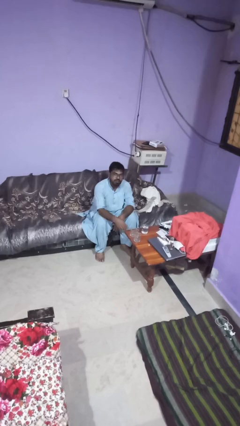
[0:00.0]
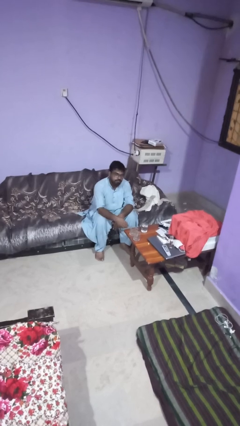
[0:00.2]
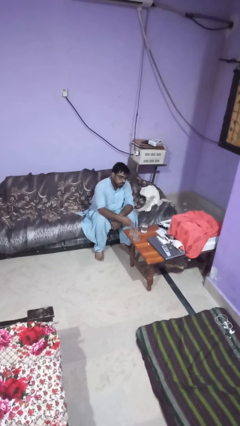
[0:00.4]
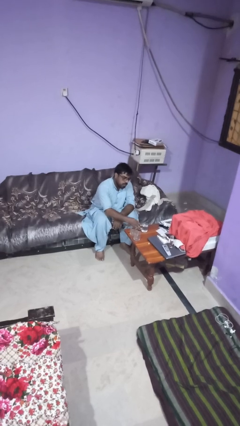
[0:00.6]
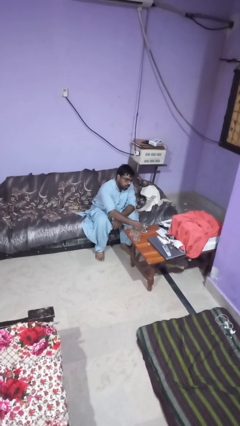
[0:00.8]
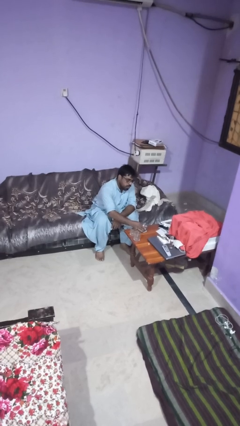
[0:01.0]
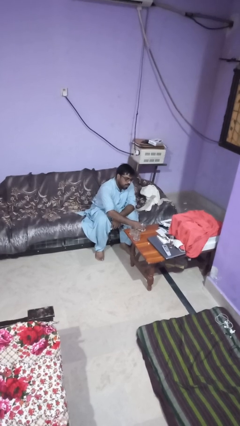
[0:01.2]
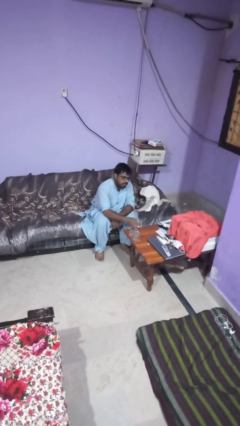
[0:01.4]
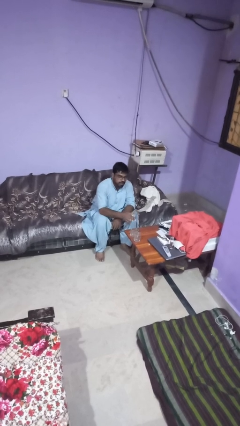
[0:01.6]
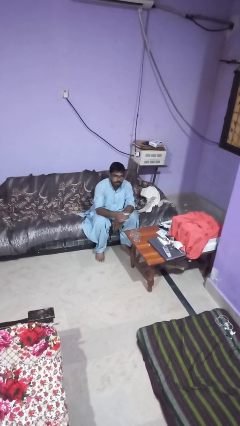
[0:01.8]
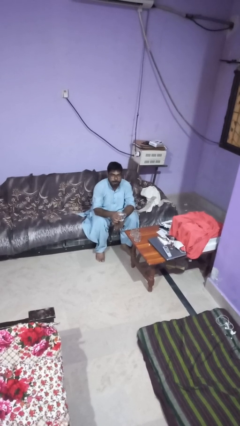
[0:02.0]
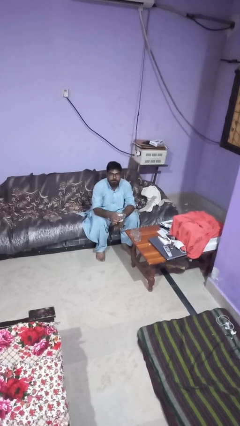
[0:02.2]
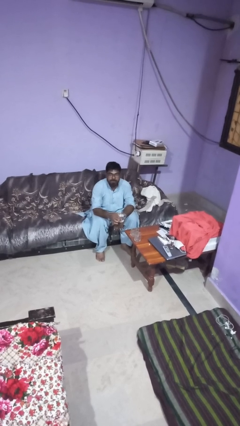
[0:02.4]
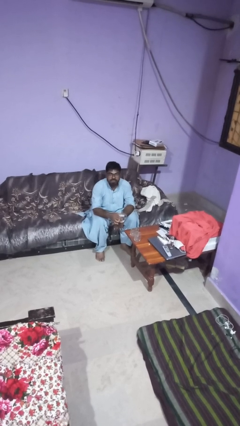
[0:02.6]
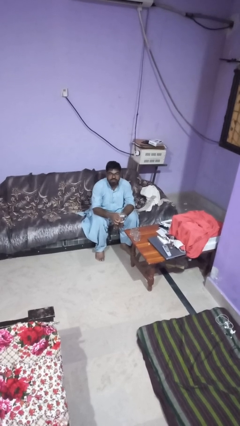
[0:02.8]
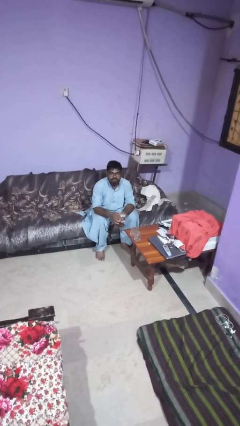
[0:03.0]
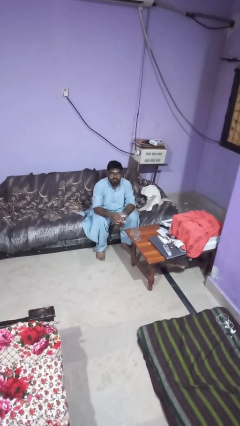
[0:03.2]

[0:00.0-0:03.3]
person picks up object from table

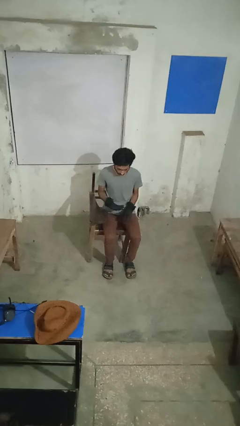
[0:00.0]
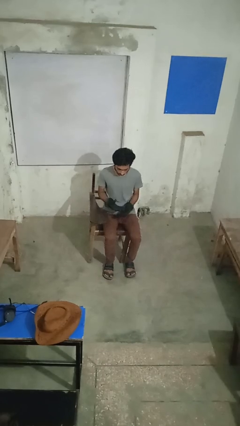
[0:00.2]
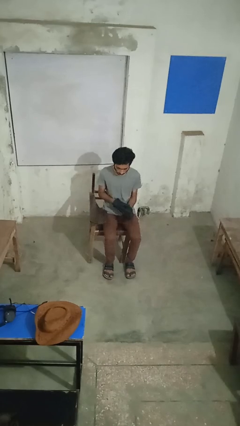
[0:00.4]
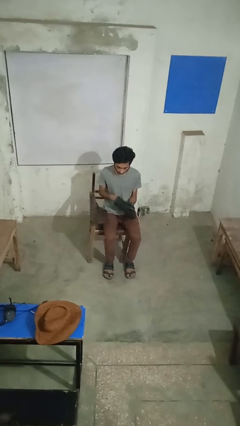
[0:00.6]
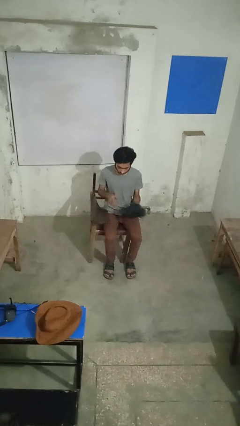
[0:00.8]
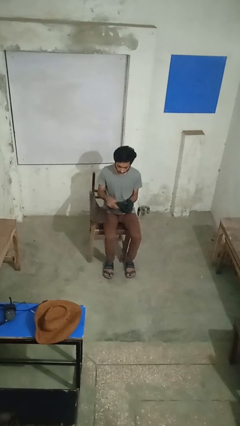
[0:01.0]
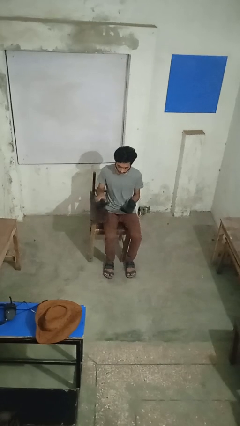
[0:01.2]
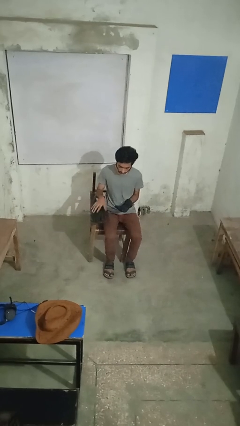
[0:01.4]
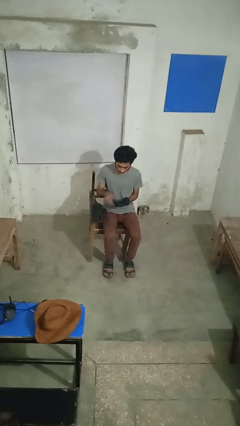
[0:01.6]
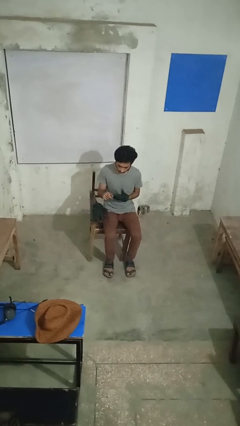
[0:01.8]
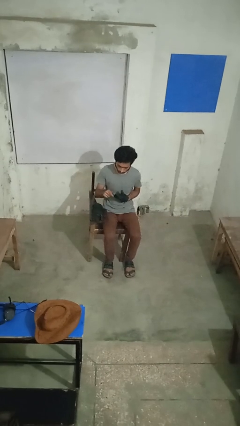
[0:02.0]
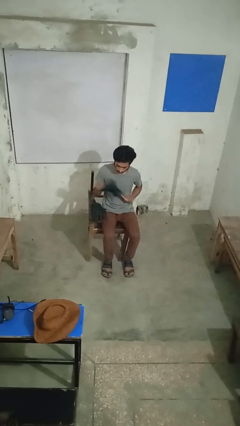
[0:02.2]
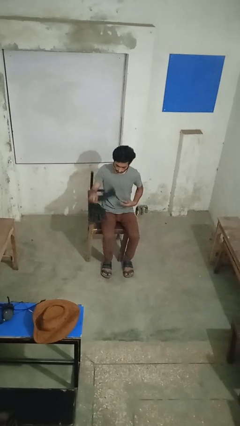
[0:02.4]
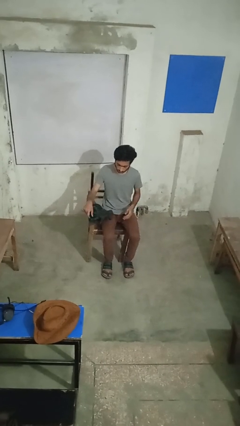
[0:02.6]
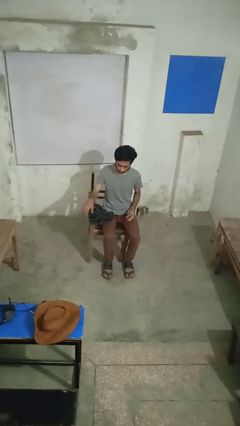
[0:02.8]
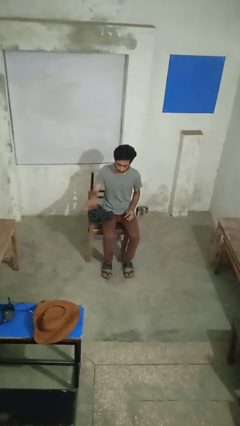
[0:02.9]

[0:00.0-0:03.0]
person takes off gloves

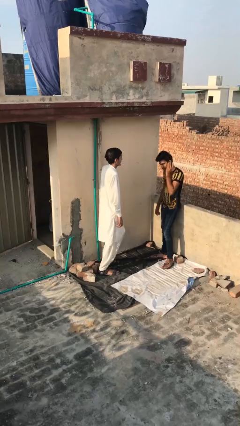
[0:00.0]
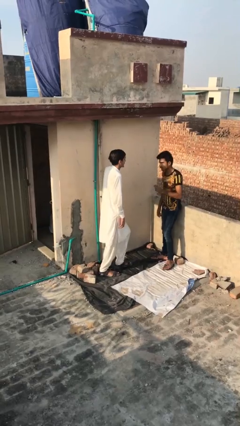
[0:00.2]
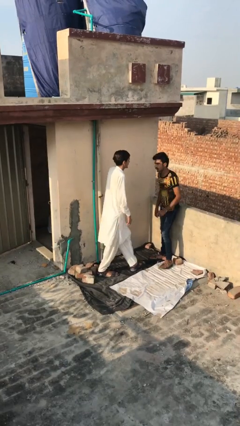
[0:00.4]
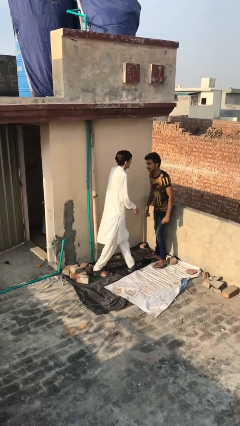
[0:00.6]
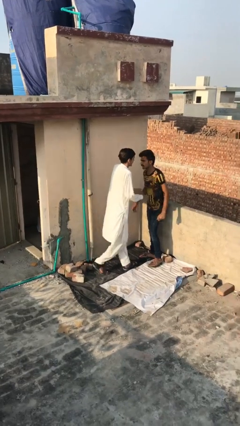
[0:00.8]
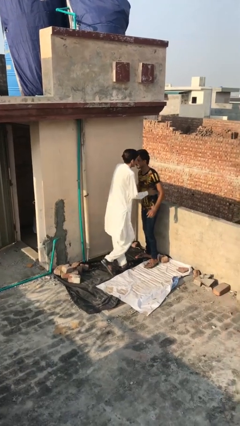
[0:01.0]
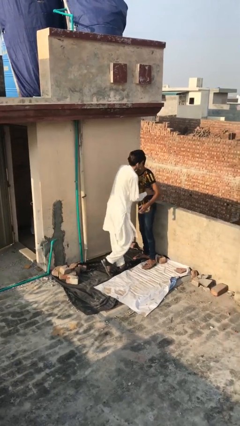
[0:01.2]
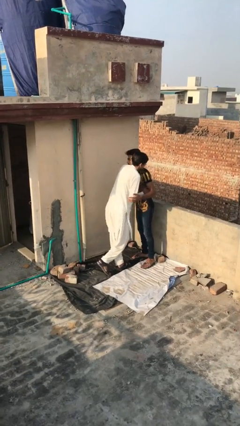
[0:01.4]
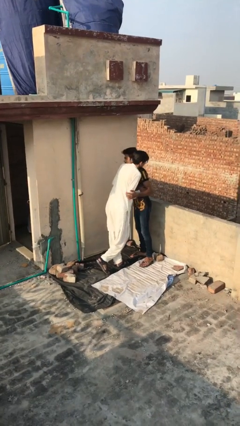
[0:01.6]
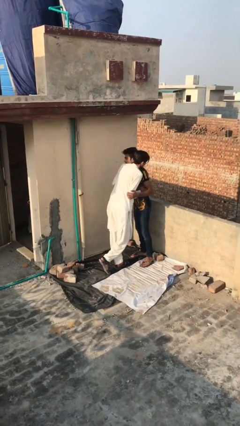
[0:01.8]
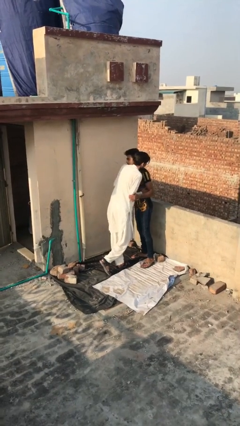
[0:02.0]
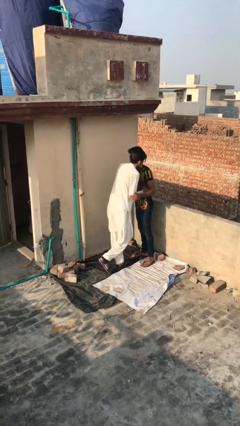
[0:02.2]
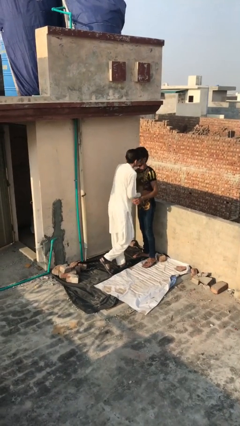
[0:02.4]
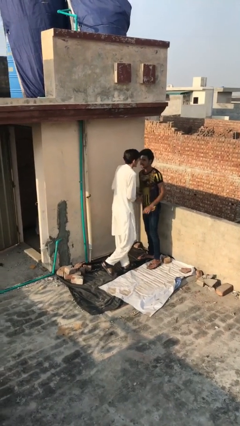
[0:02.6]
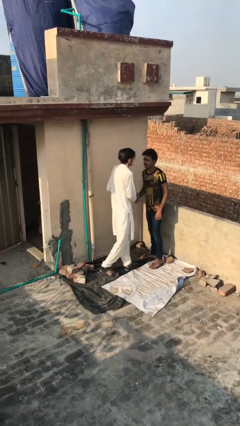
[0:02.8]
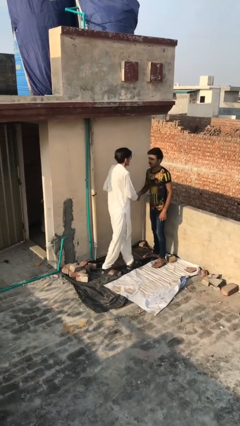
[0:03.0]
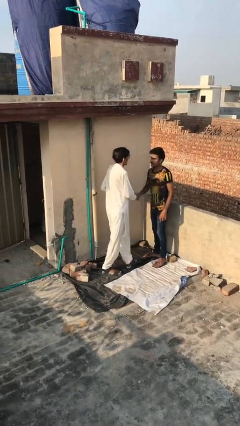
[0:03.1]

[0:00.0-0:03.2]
person embraces person

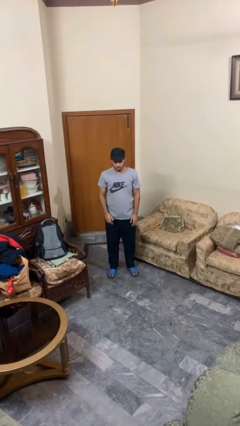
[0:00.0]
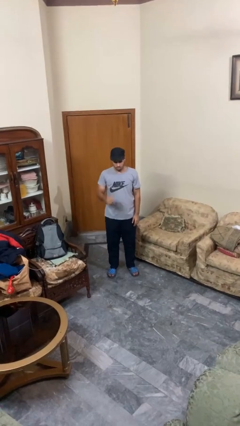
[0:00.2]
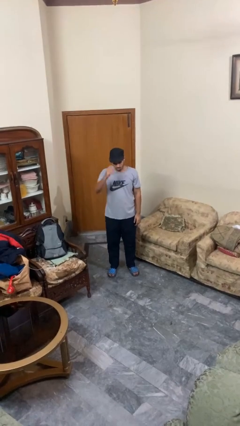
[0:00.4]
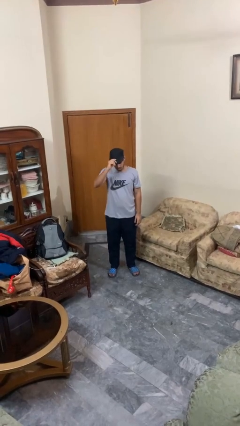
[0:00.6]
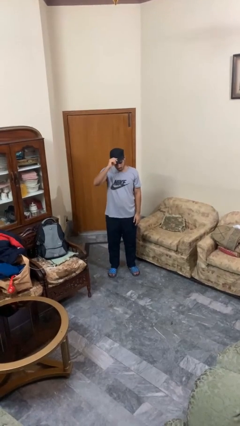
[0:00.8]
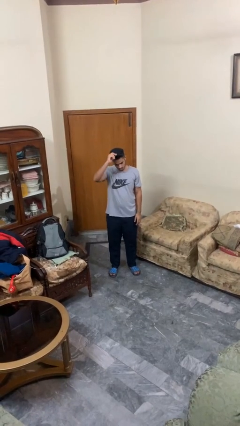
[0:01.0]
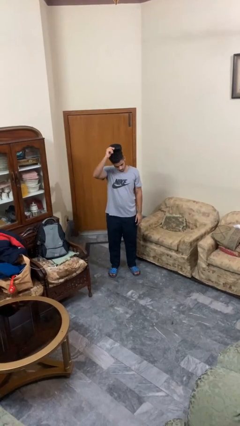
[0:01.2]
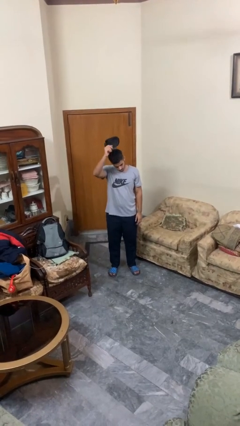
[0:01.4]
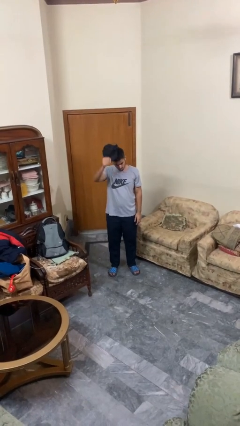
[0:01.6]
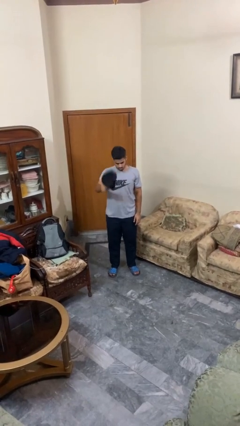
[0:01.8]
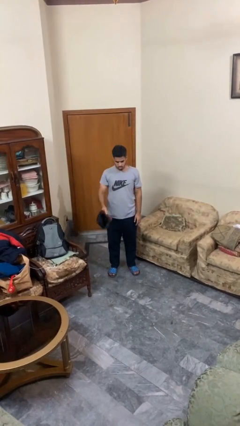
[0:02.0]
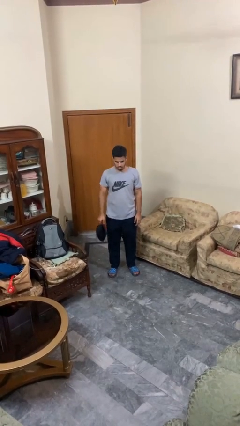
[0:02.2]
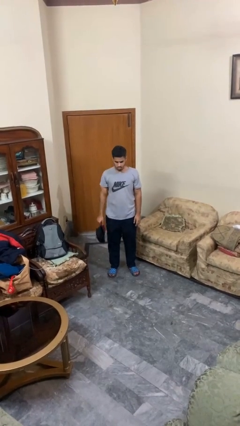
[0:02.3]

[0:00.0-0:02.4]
person takes off hat

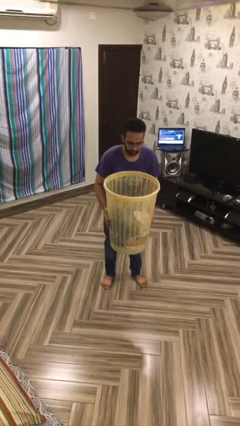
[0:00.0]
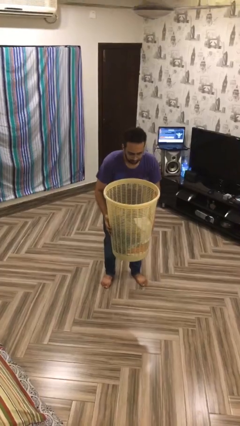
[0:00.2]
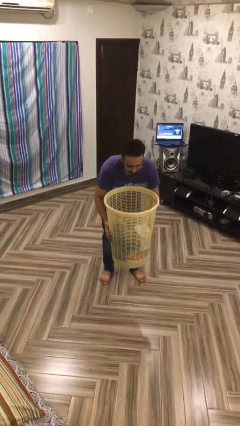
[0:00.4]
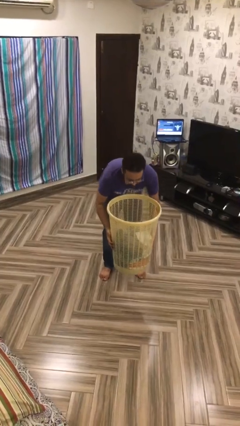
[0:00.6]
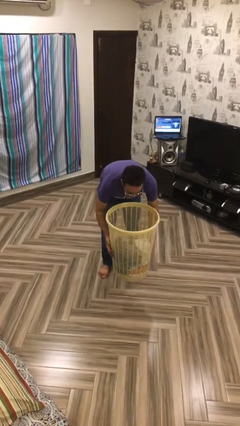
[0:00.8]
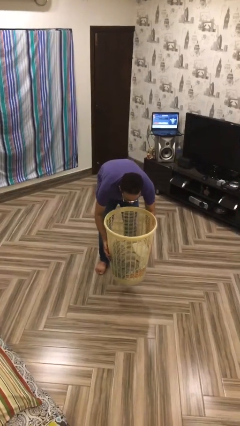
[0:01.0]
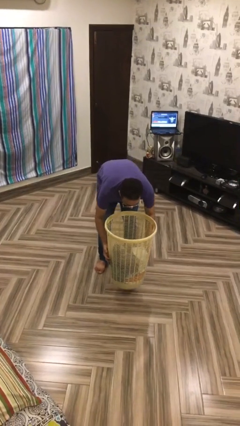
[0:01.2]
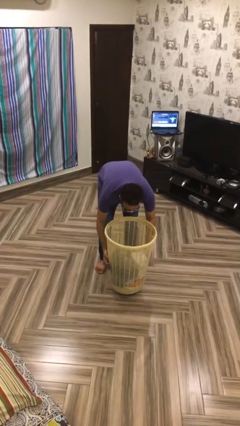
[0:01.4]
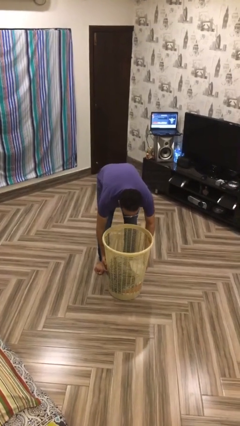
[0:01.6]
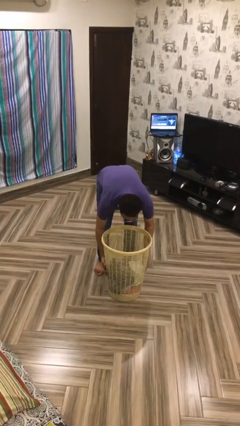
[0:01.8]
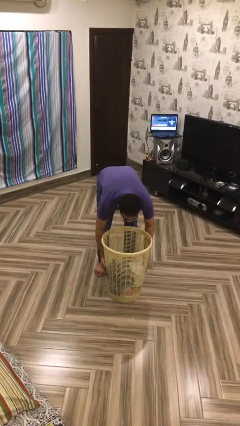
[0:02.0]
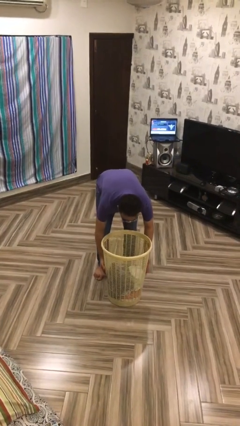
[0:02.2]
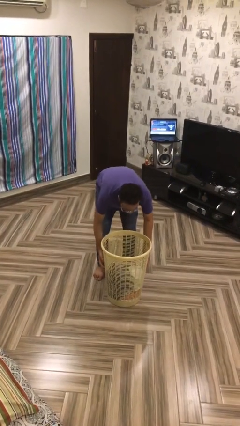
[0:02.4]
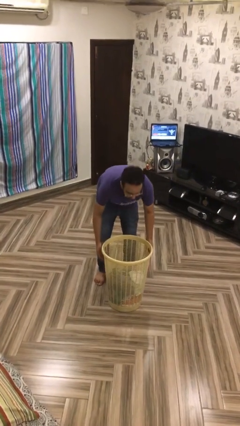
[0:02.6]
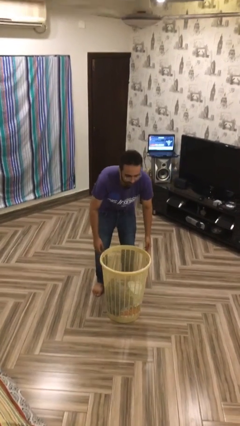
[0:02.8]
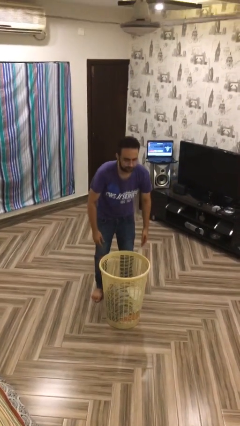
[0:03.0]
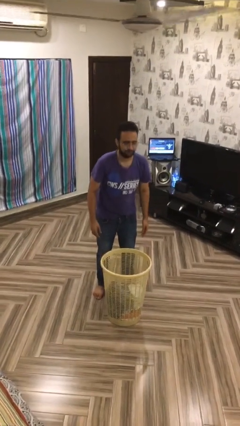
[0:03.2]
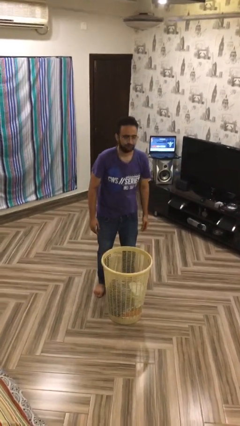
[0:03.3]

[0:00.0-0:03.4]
person puts down object on floor

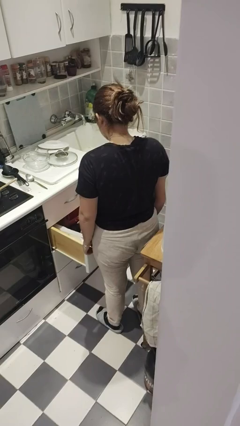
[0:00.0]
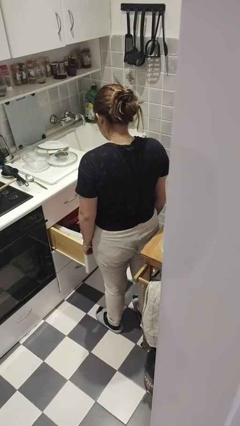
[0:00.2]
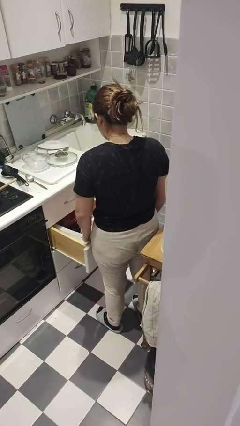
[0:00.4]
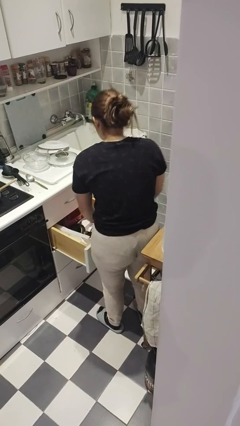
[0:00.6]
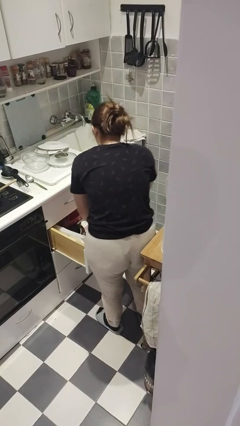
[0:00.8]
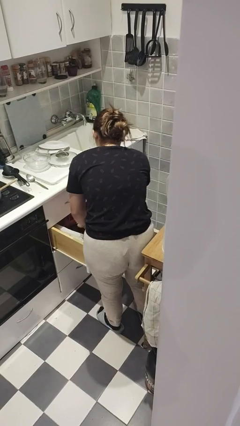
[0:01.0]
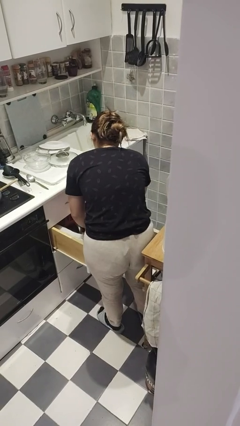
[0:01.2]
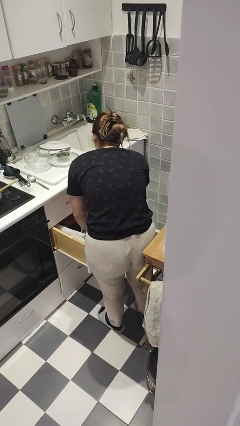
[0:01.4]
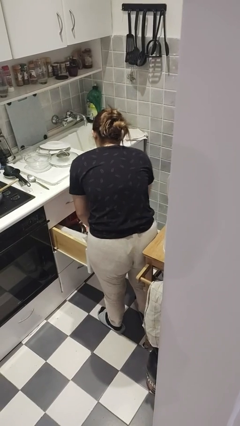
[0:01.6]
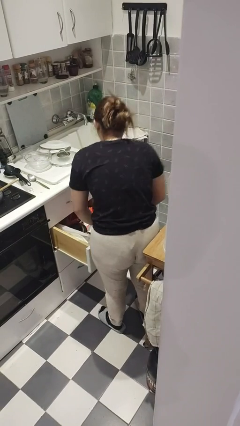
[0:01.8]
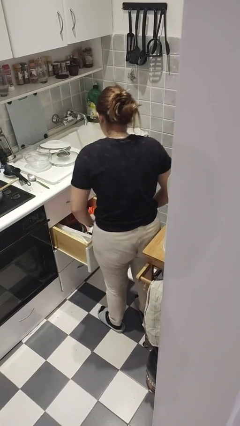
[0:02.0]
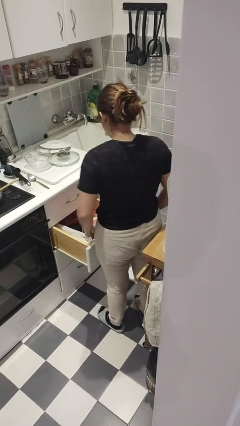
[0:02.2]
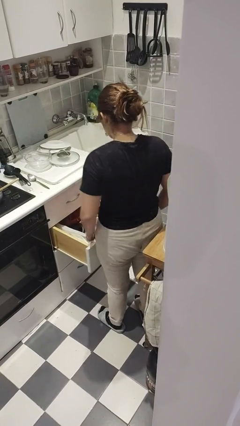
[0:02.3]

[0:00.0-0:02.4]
person searches in kitchen drawer
